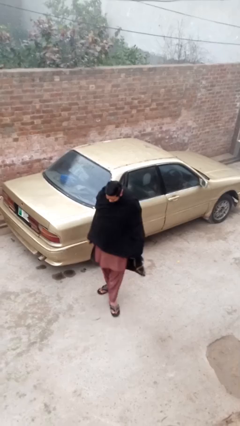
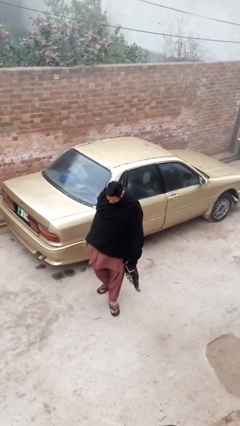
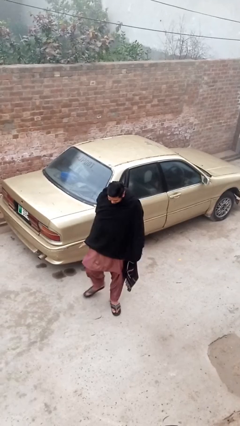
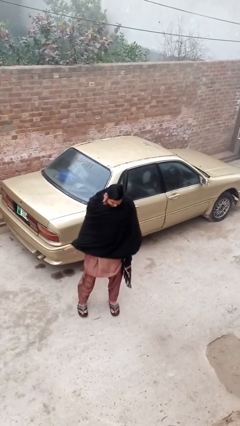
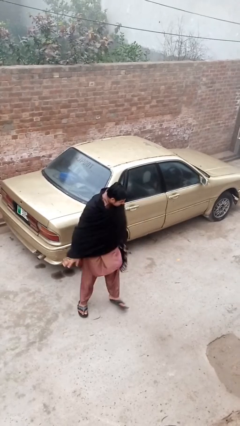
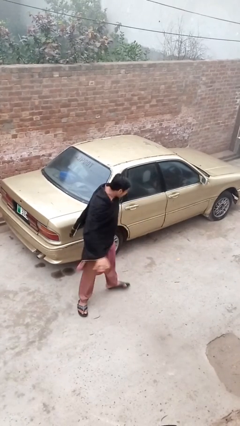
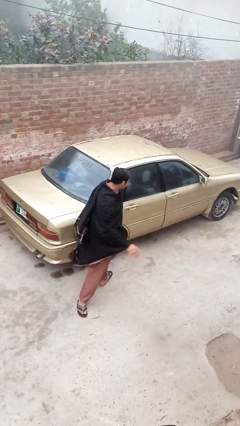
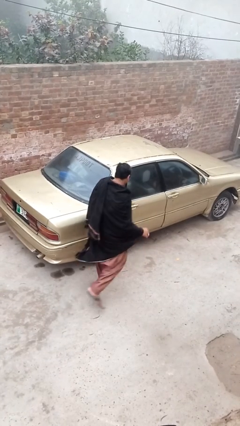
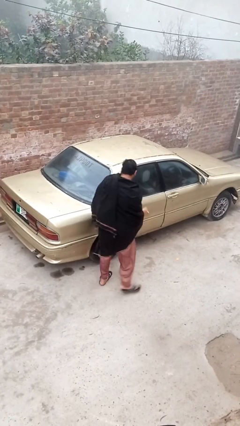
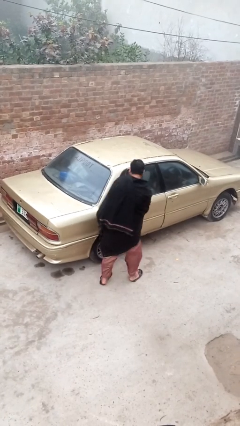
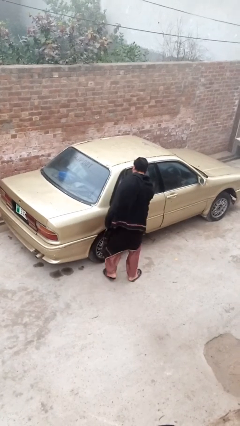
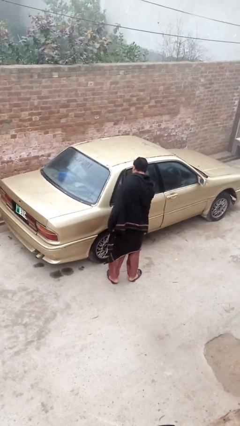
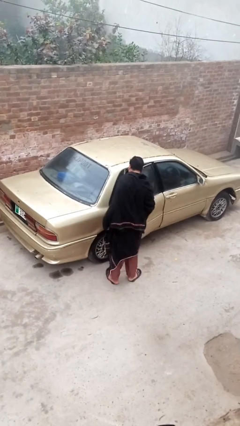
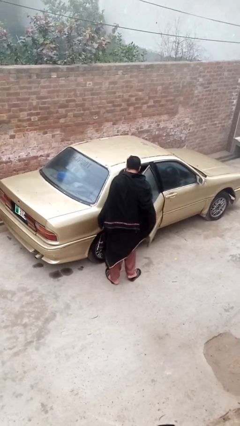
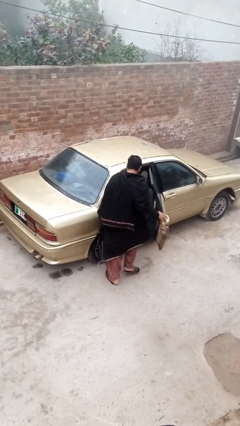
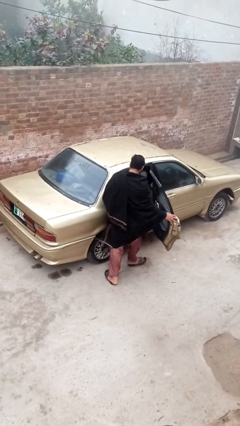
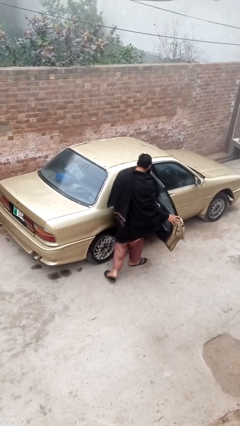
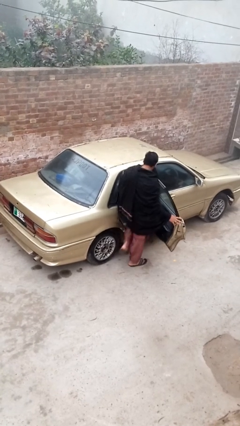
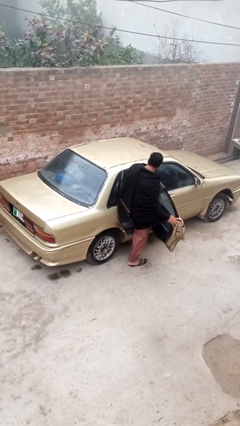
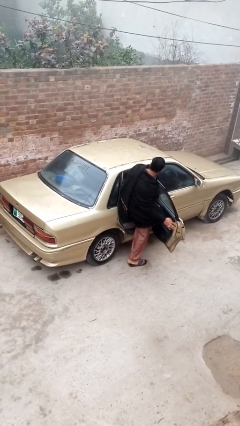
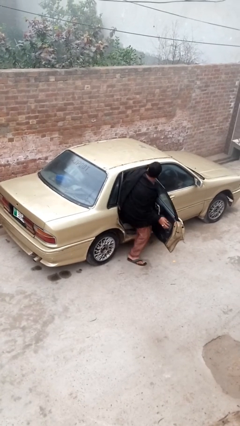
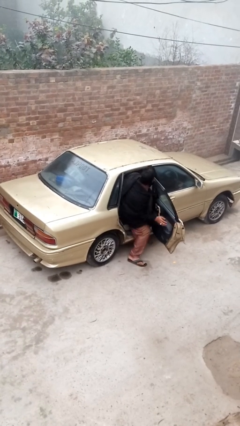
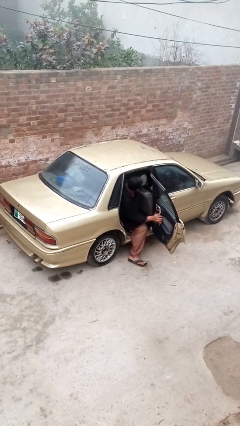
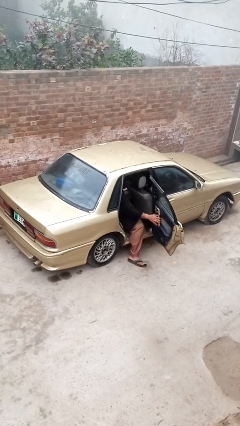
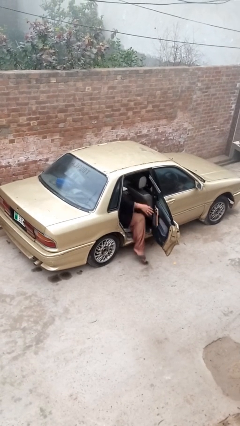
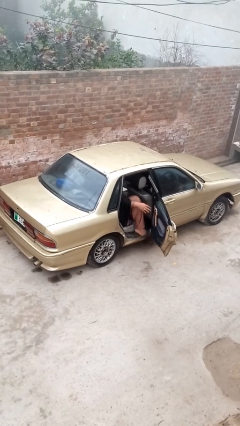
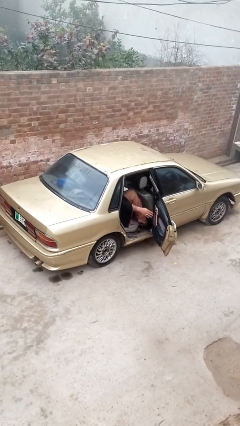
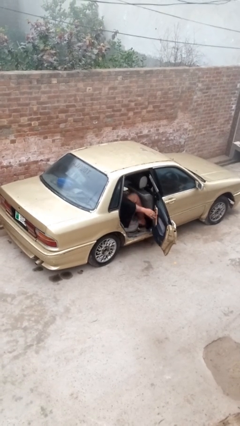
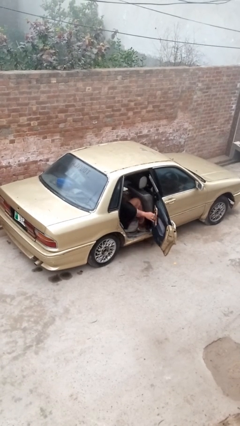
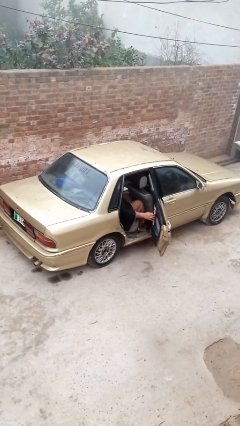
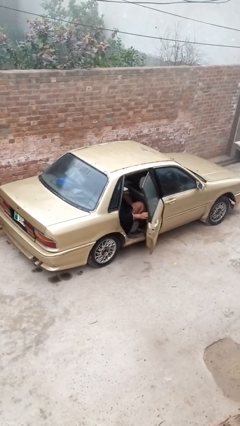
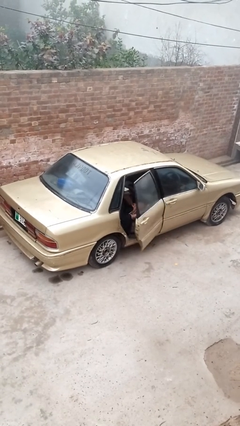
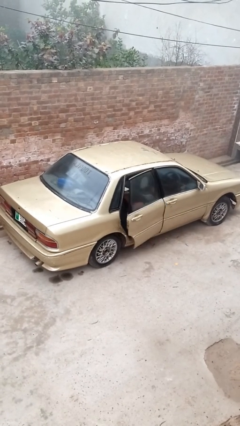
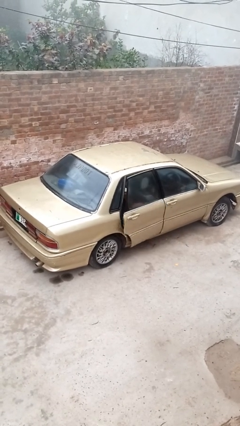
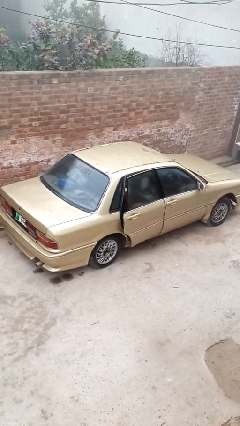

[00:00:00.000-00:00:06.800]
car picks up person

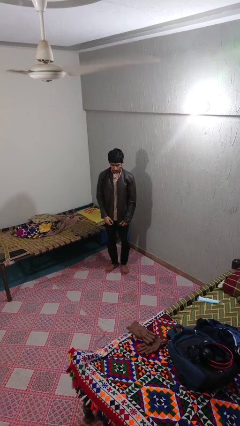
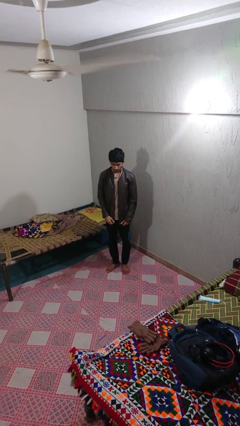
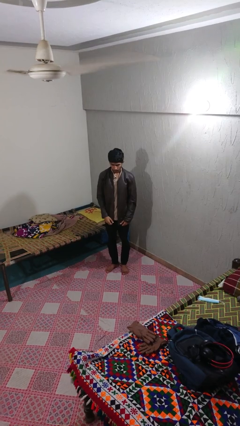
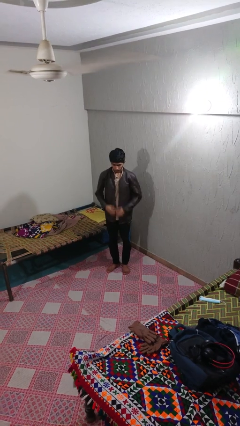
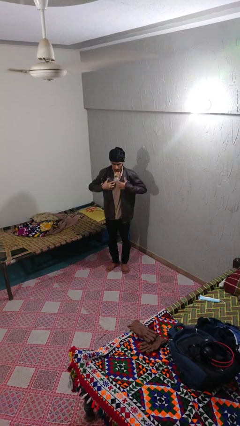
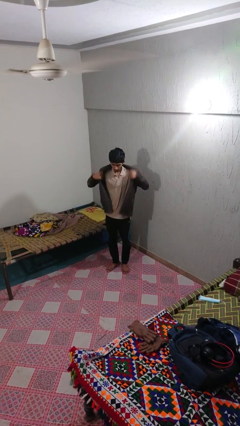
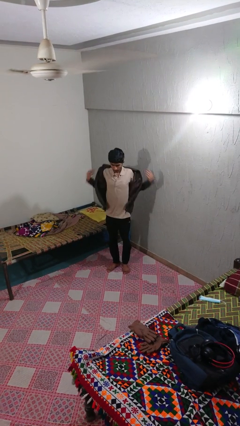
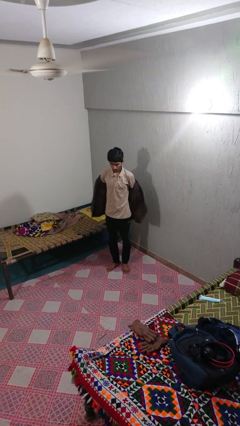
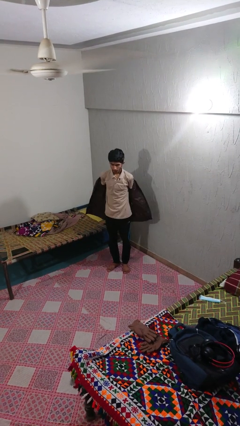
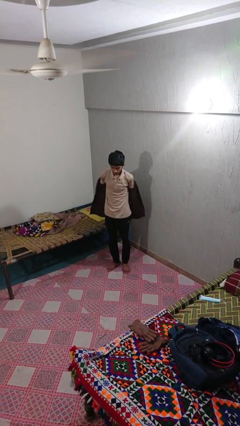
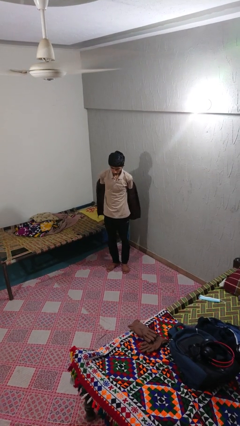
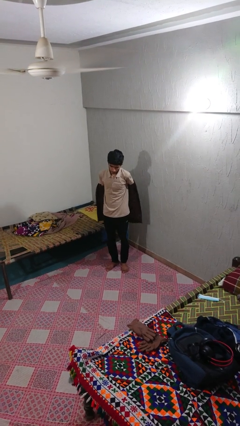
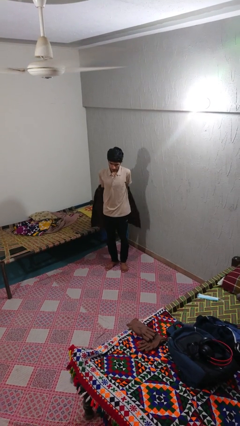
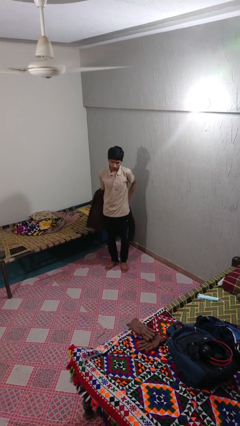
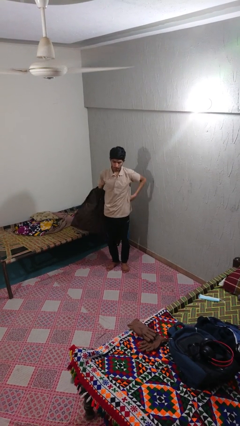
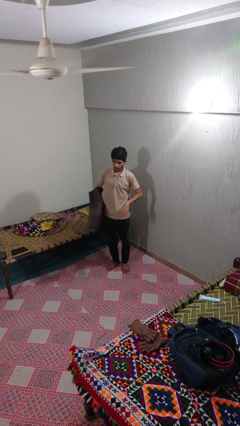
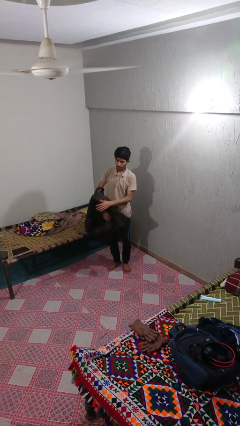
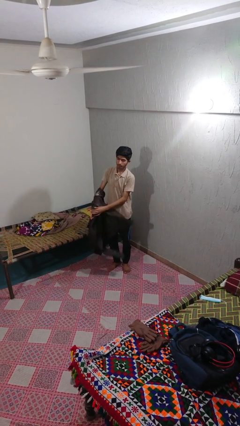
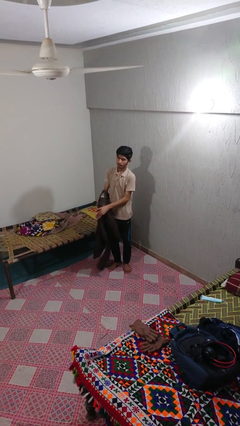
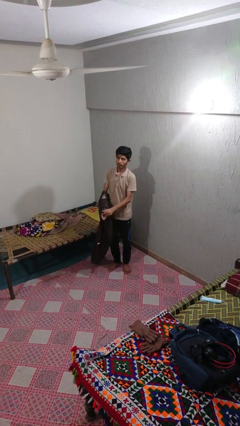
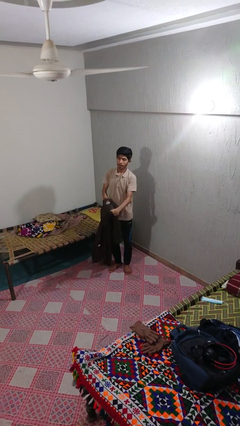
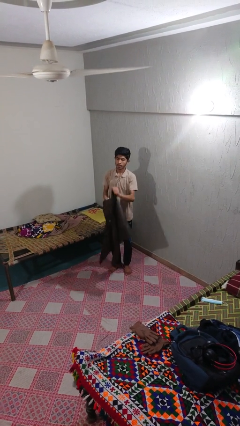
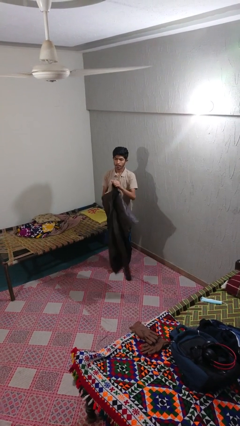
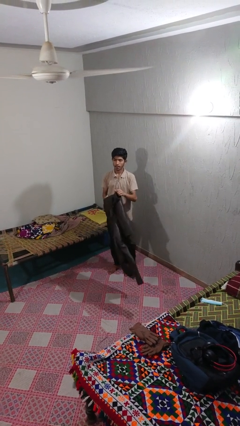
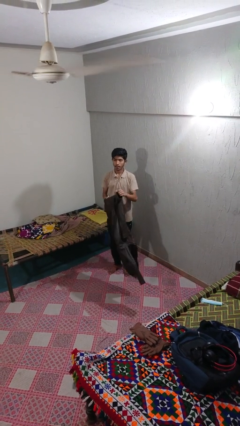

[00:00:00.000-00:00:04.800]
person takes off jacket

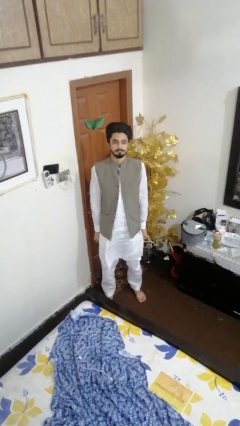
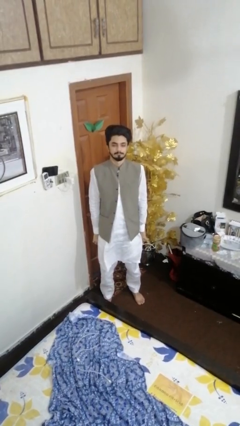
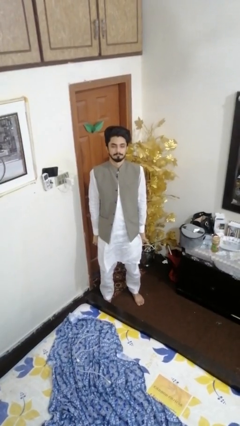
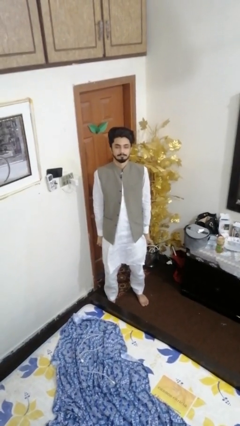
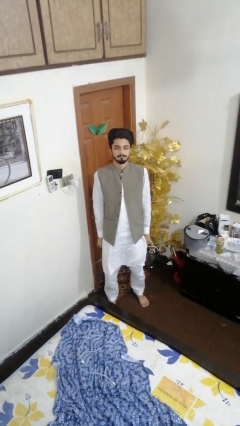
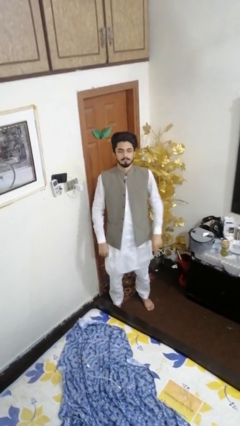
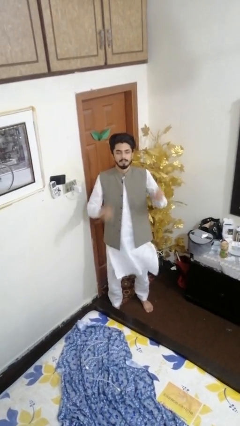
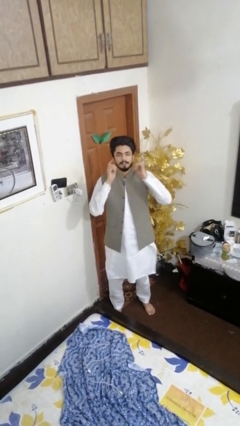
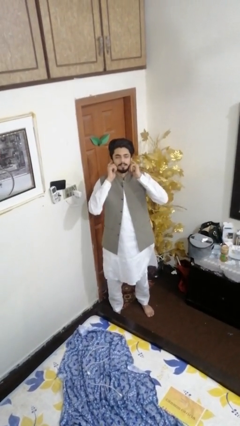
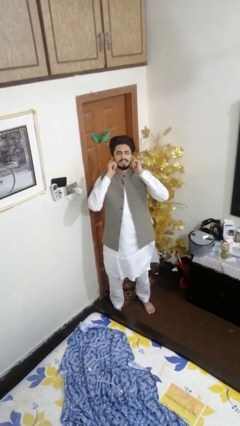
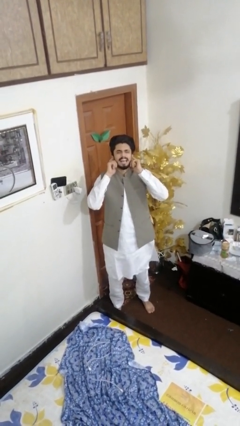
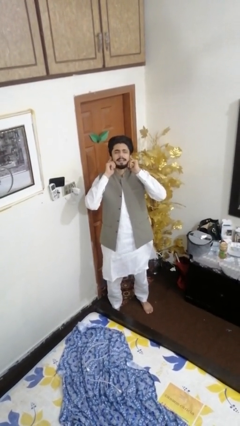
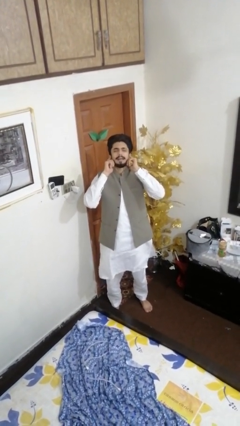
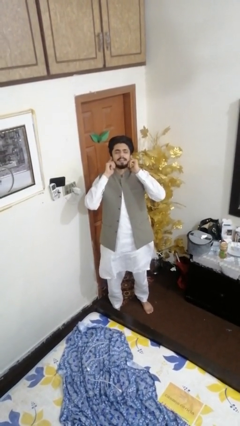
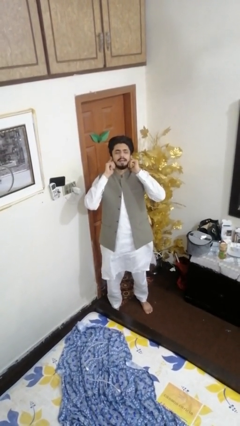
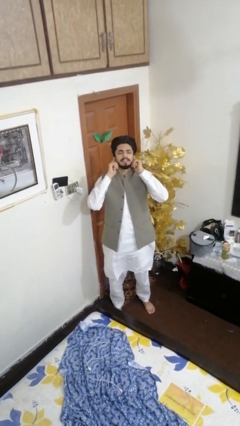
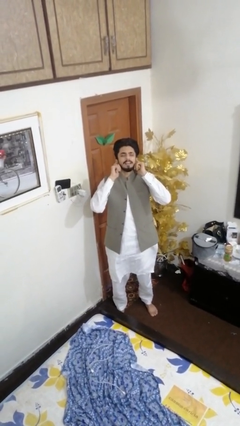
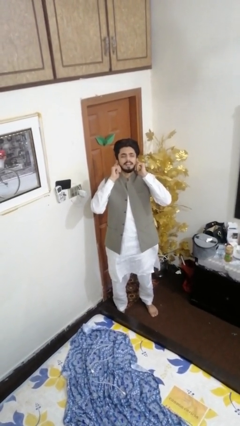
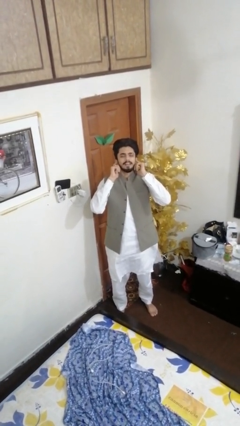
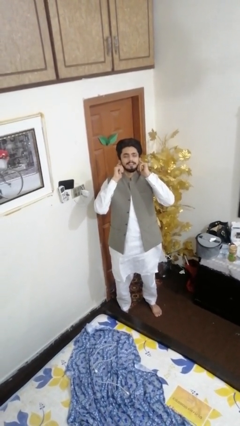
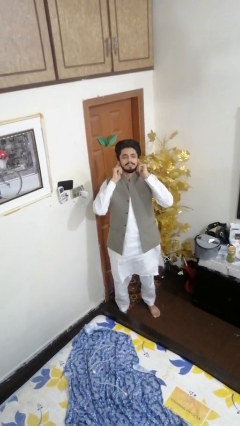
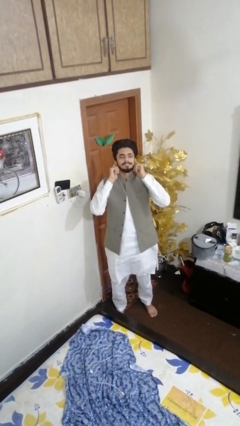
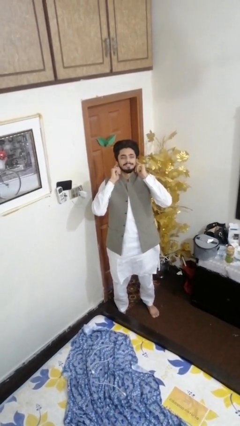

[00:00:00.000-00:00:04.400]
person puts fingers in ear

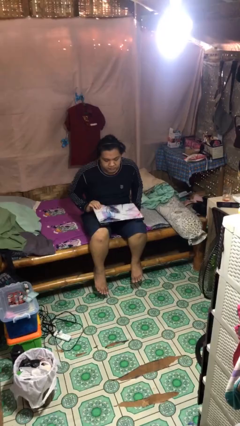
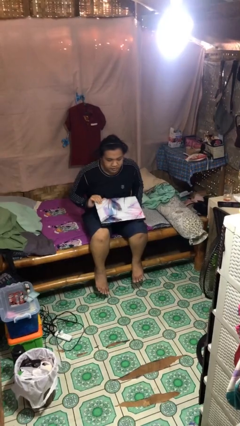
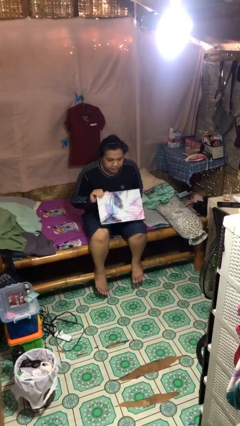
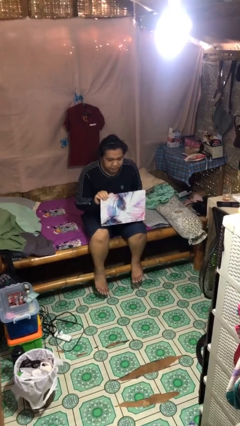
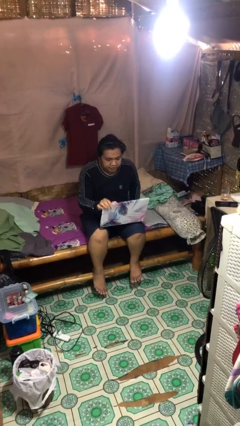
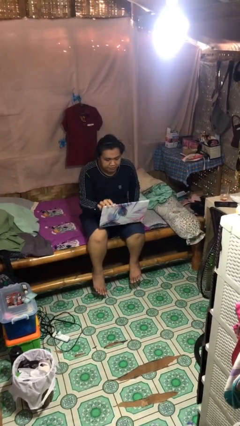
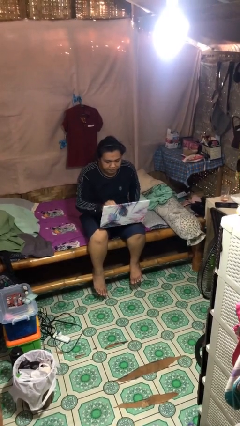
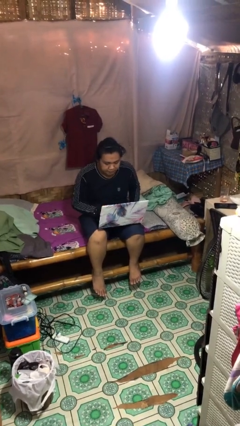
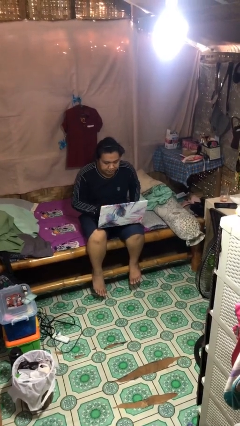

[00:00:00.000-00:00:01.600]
person opens laptop
